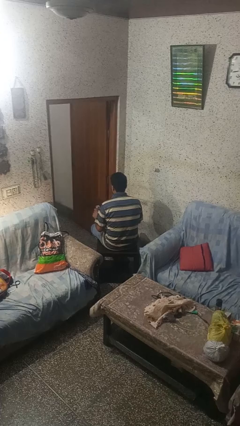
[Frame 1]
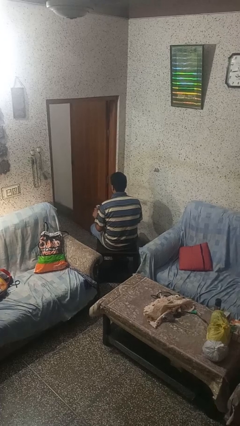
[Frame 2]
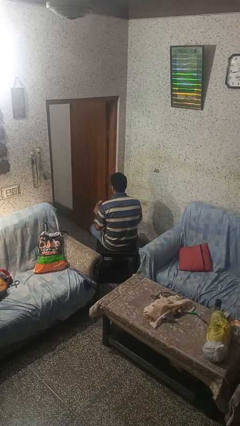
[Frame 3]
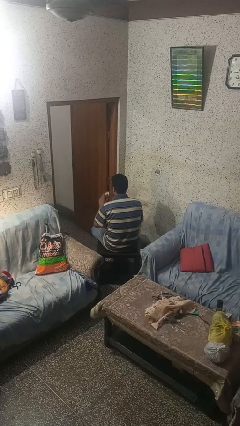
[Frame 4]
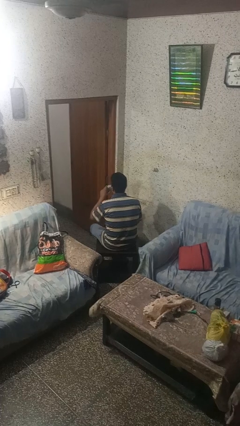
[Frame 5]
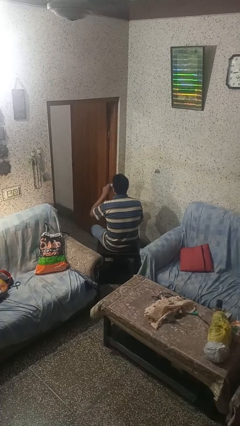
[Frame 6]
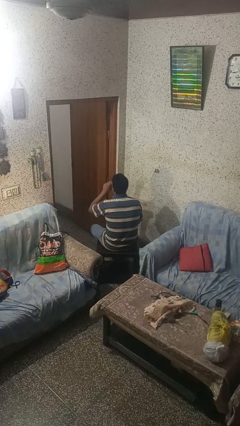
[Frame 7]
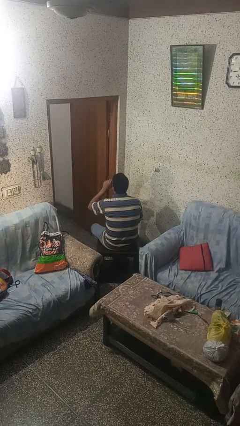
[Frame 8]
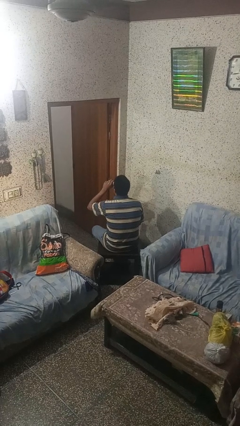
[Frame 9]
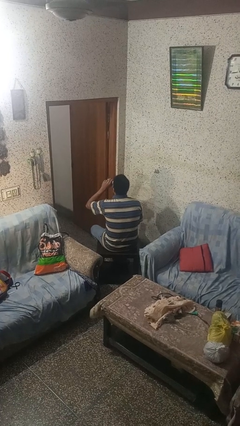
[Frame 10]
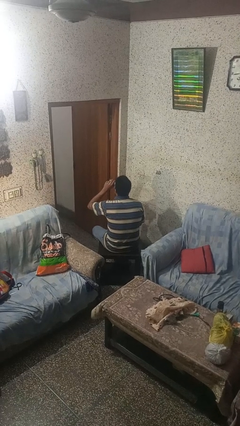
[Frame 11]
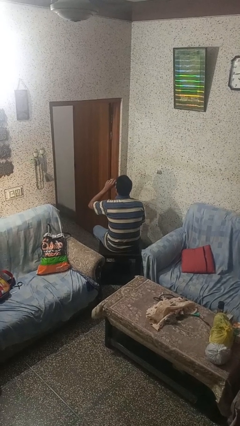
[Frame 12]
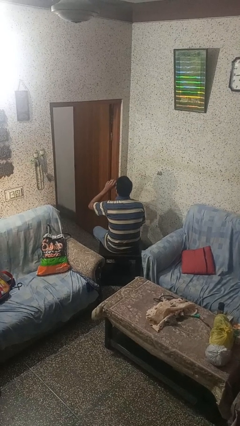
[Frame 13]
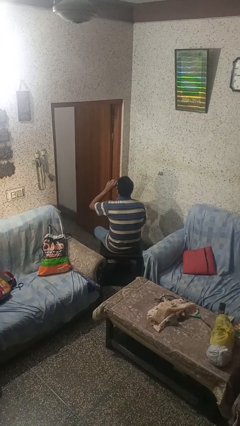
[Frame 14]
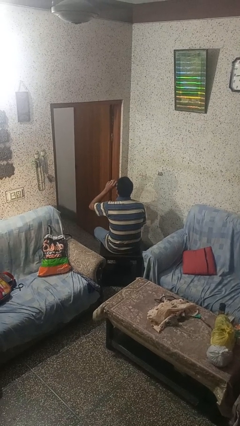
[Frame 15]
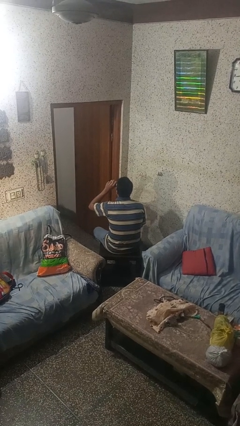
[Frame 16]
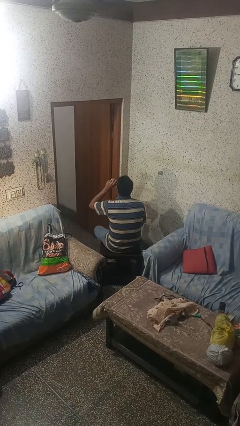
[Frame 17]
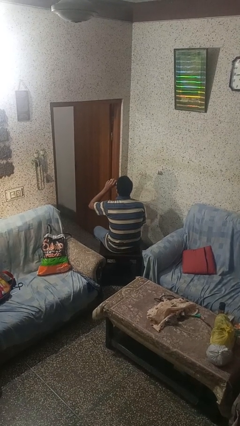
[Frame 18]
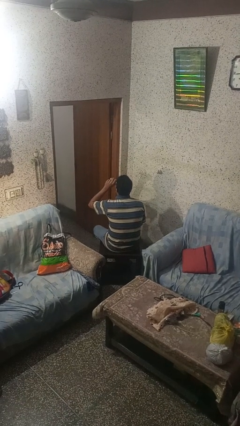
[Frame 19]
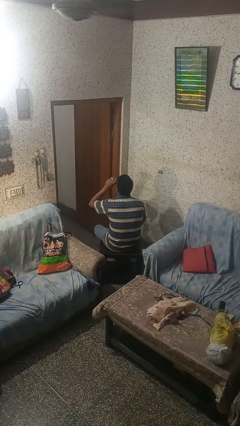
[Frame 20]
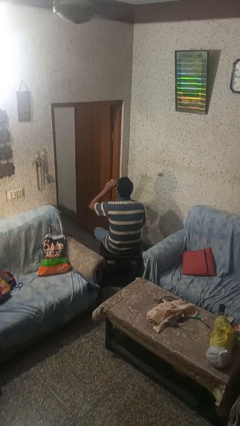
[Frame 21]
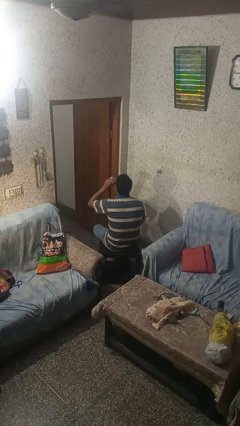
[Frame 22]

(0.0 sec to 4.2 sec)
person drinks from beverage can

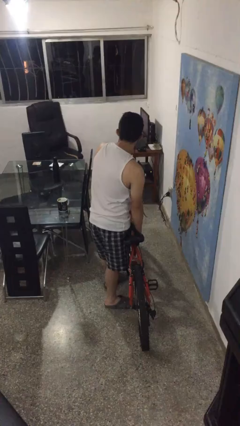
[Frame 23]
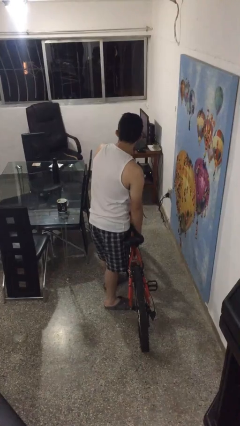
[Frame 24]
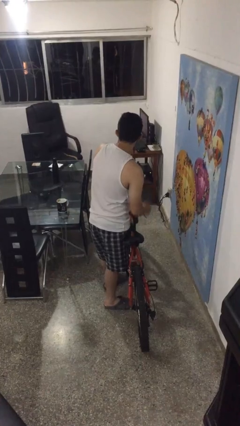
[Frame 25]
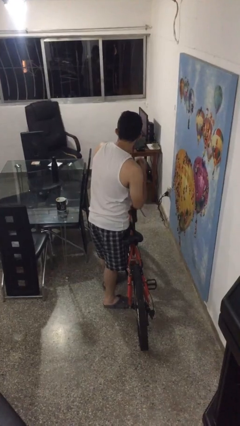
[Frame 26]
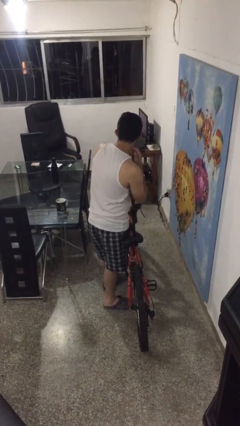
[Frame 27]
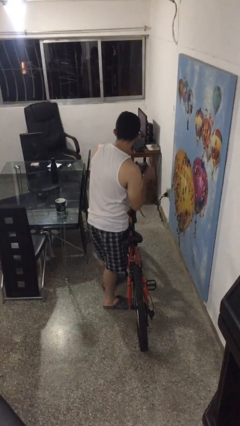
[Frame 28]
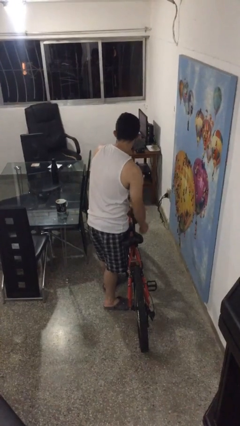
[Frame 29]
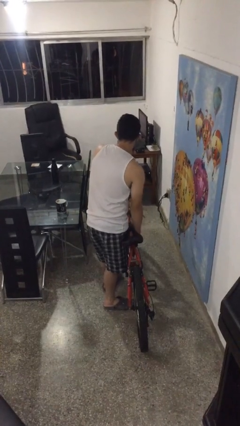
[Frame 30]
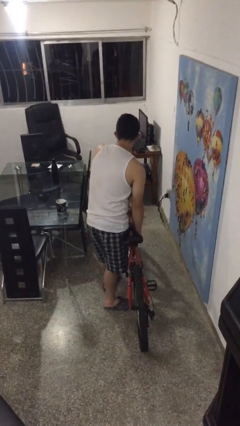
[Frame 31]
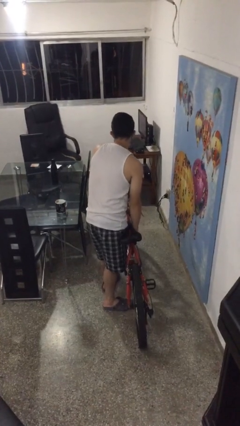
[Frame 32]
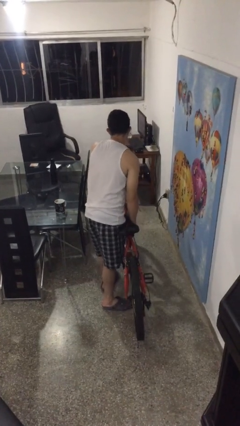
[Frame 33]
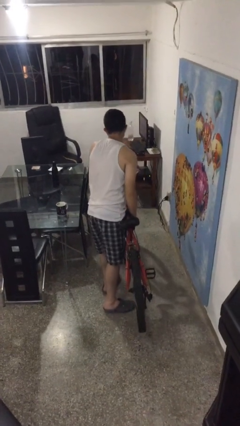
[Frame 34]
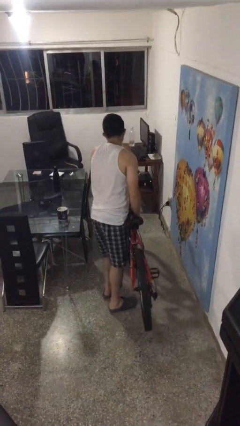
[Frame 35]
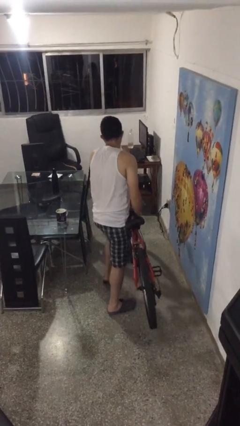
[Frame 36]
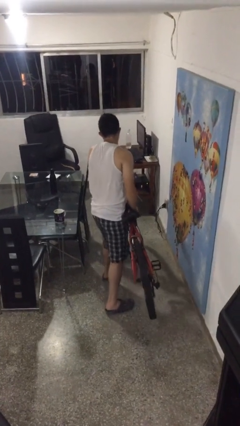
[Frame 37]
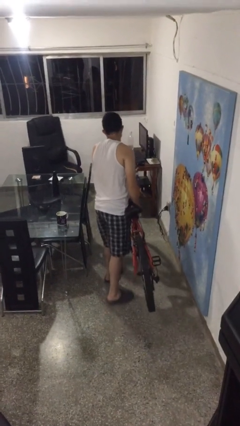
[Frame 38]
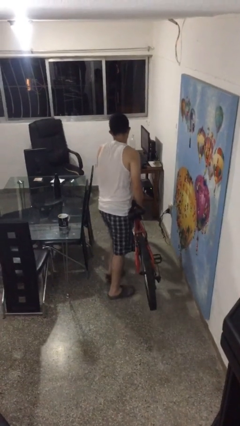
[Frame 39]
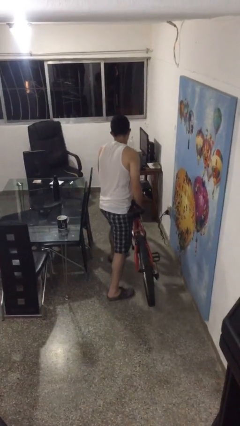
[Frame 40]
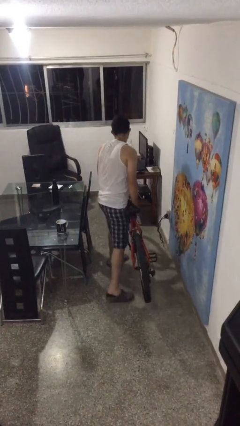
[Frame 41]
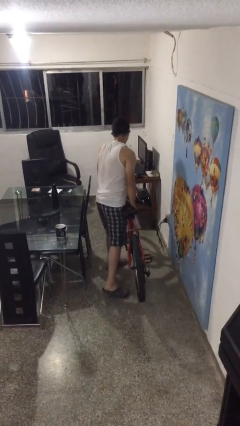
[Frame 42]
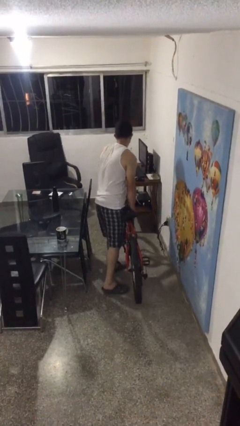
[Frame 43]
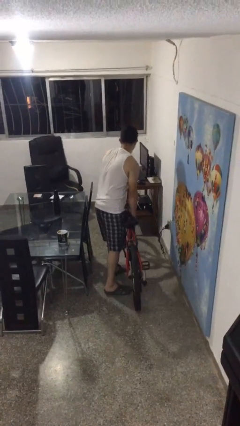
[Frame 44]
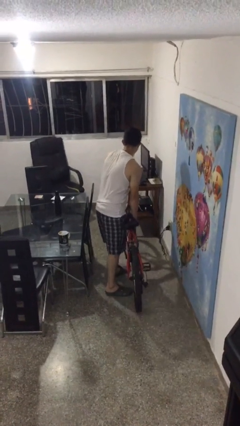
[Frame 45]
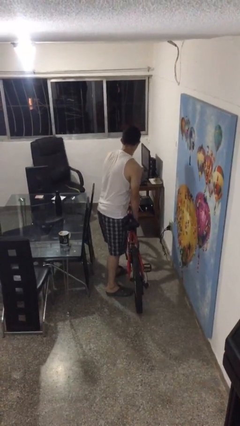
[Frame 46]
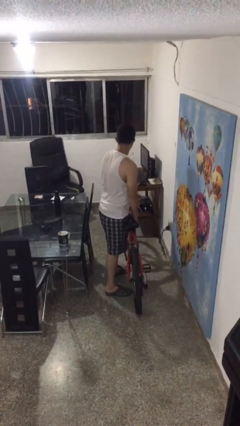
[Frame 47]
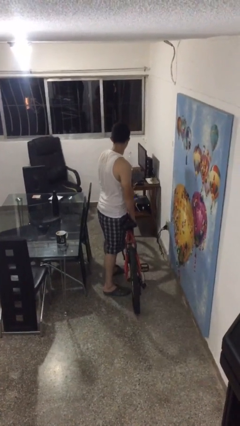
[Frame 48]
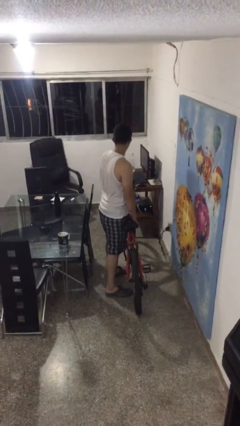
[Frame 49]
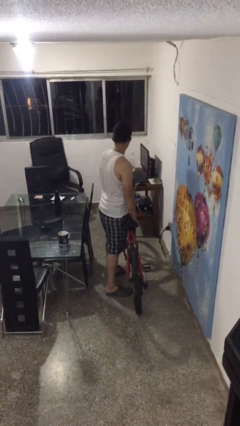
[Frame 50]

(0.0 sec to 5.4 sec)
person carries bicycle

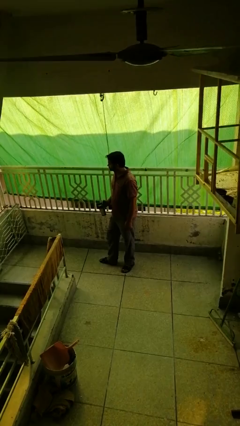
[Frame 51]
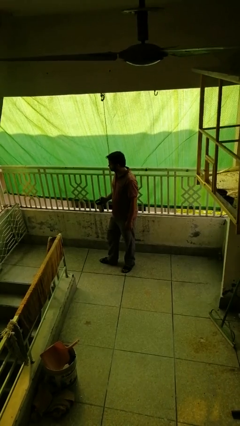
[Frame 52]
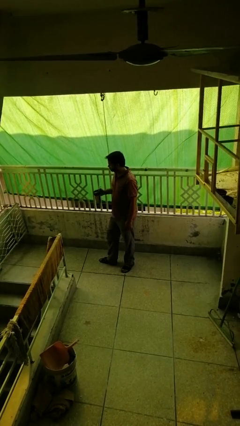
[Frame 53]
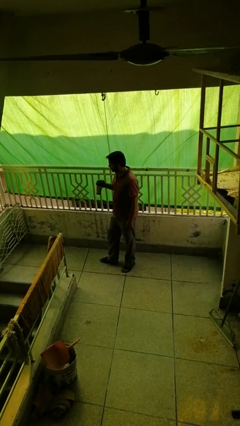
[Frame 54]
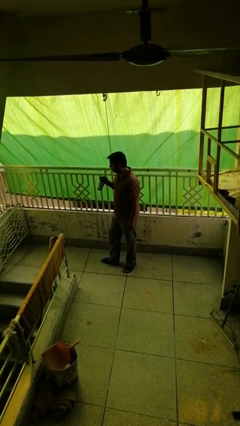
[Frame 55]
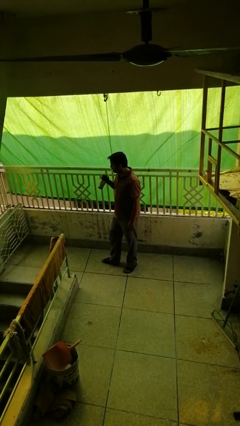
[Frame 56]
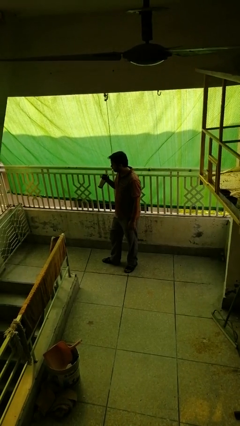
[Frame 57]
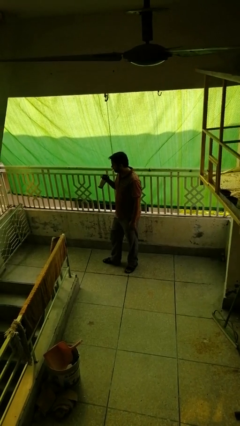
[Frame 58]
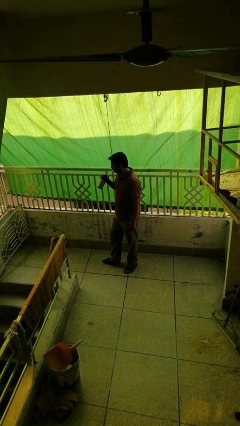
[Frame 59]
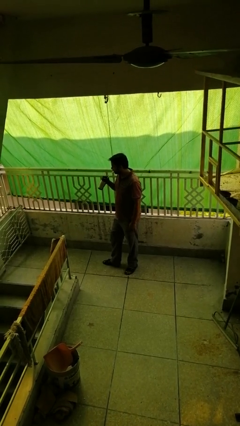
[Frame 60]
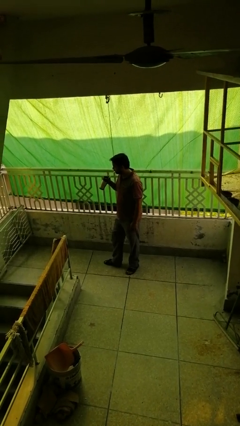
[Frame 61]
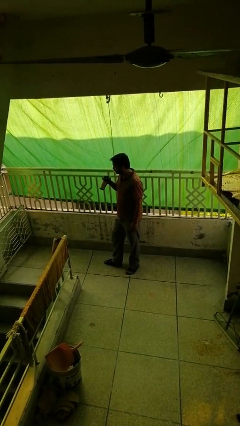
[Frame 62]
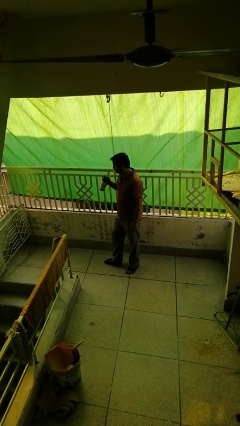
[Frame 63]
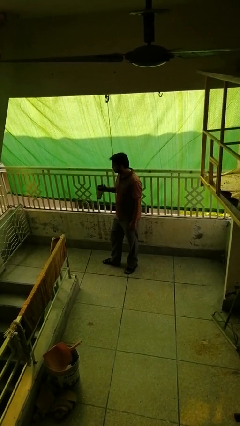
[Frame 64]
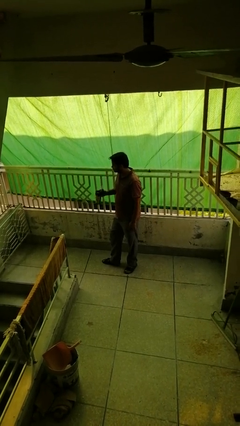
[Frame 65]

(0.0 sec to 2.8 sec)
person drinks from straw

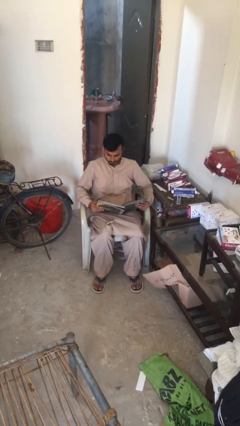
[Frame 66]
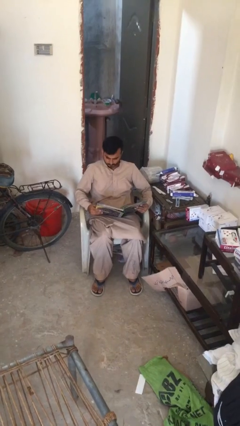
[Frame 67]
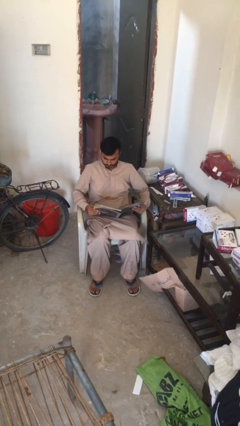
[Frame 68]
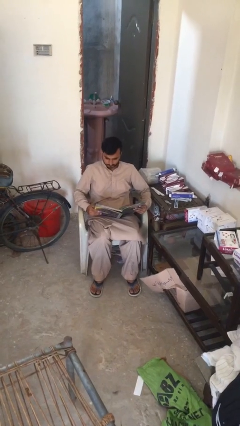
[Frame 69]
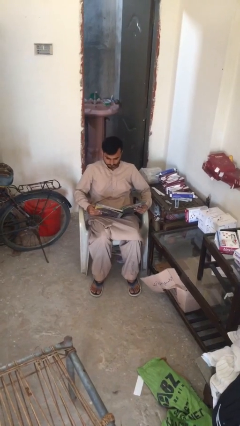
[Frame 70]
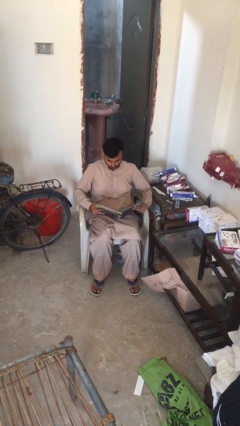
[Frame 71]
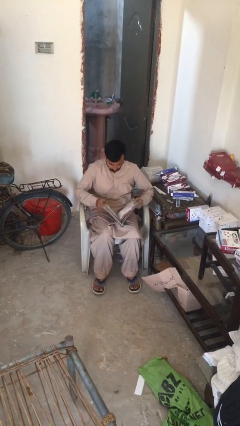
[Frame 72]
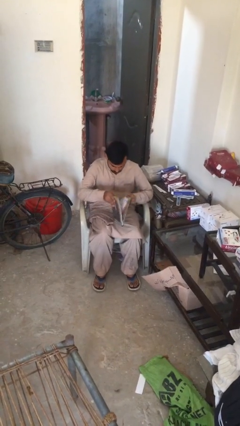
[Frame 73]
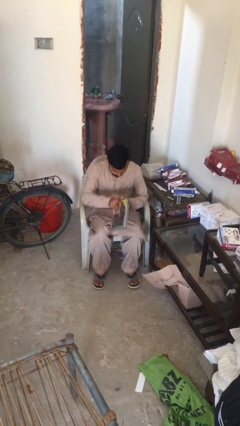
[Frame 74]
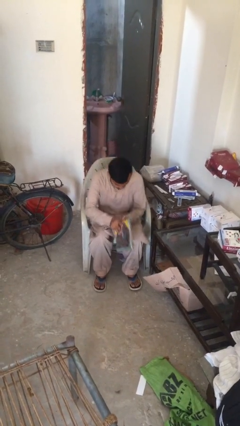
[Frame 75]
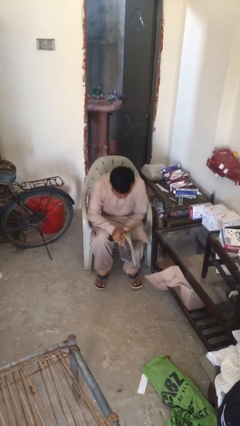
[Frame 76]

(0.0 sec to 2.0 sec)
person stands up

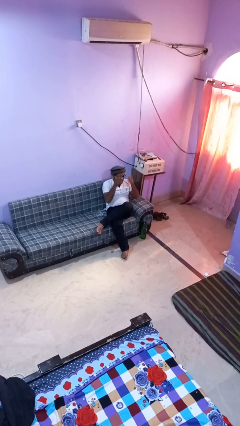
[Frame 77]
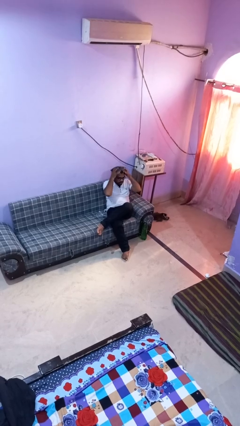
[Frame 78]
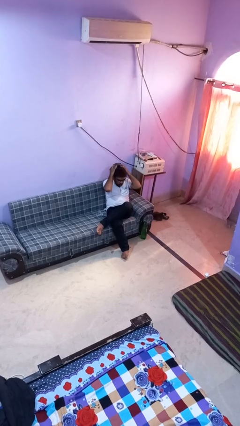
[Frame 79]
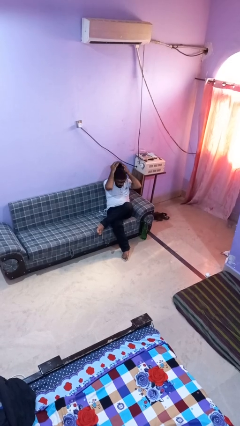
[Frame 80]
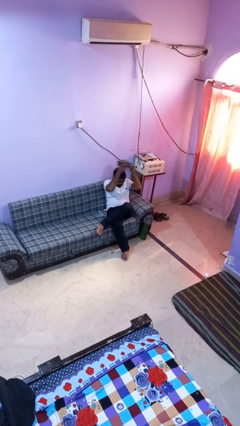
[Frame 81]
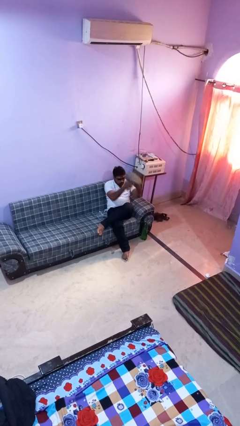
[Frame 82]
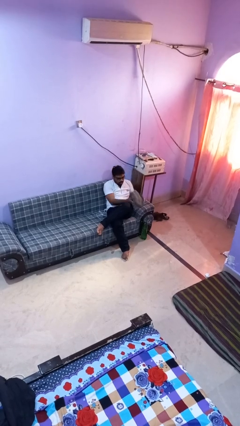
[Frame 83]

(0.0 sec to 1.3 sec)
person takes off hat

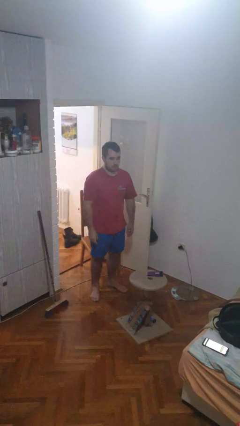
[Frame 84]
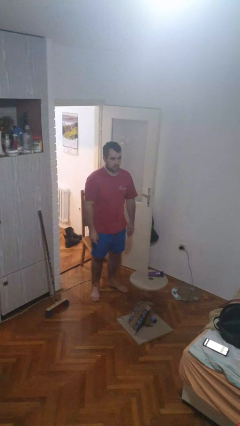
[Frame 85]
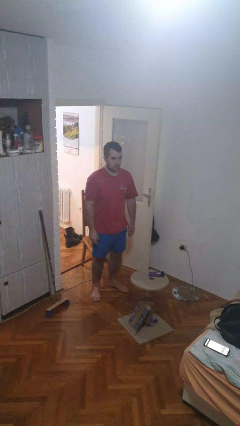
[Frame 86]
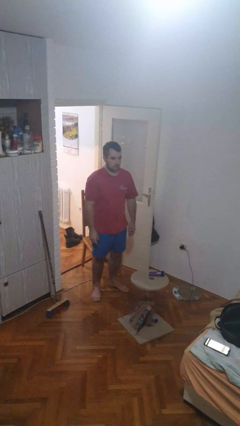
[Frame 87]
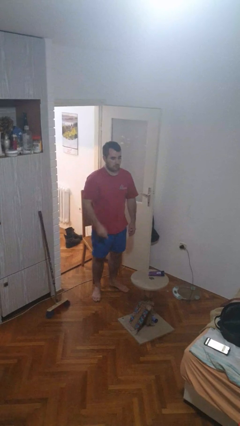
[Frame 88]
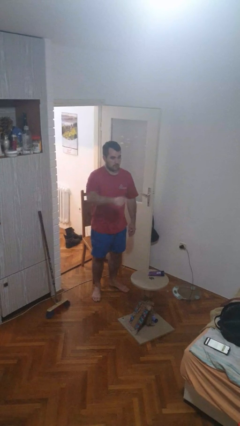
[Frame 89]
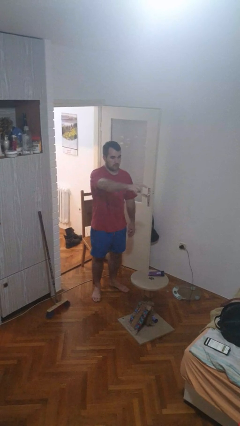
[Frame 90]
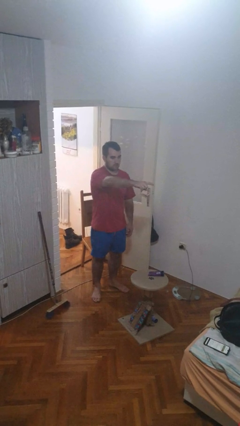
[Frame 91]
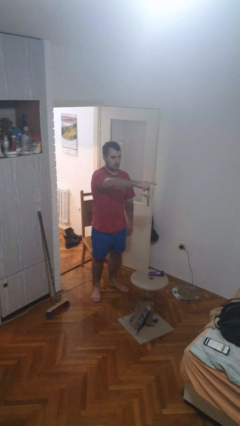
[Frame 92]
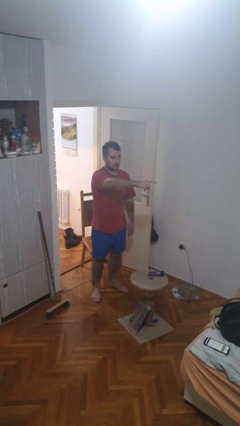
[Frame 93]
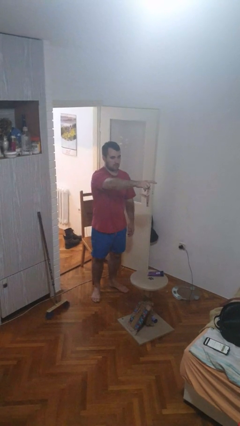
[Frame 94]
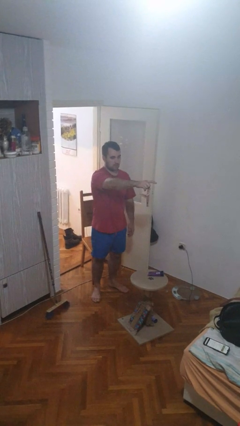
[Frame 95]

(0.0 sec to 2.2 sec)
person points at person
